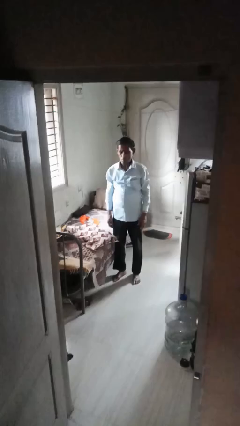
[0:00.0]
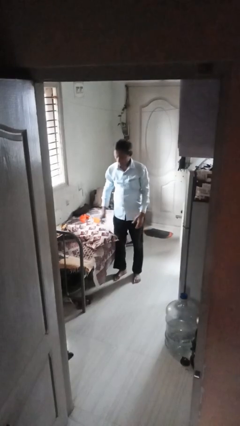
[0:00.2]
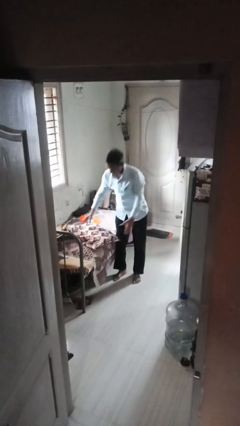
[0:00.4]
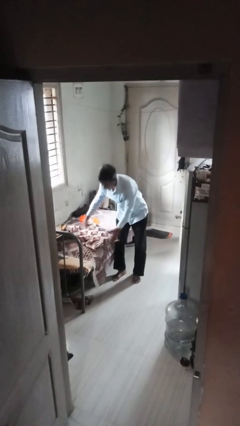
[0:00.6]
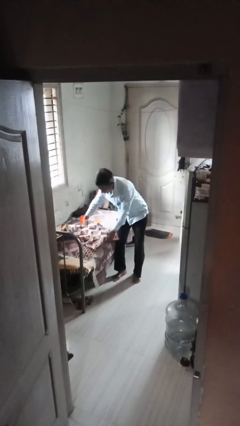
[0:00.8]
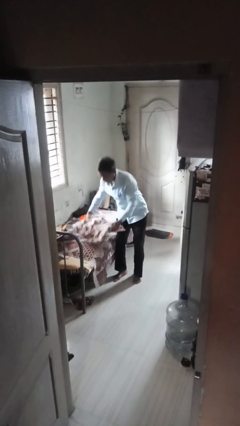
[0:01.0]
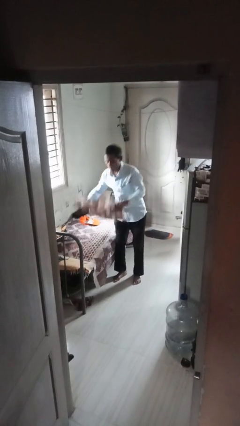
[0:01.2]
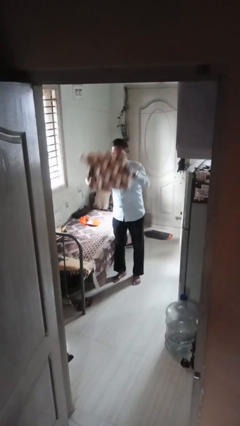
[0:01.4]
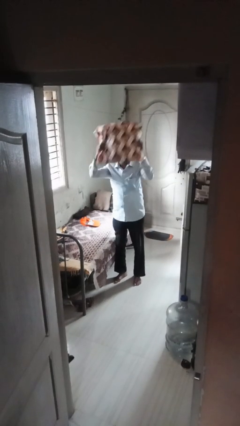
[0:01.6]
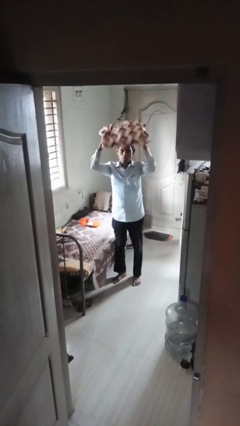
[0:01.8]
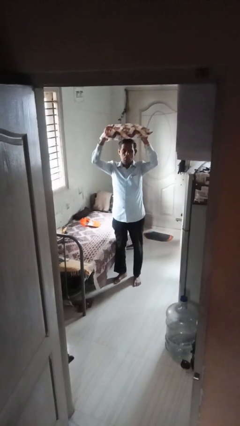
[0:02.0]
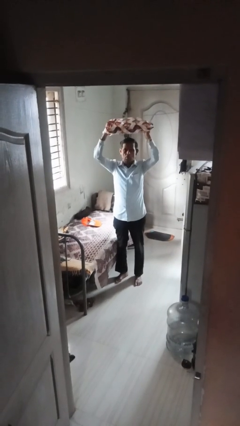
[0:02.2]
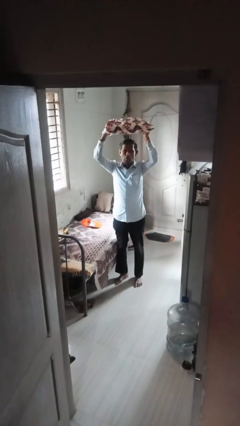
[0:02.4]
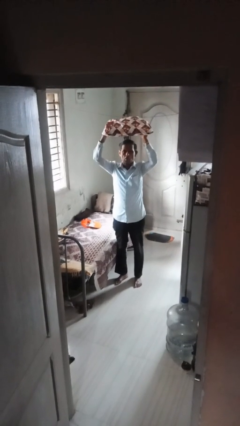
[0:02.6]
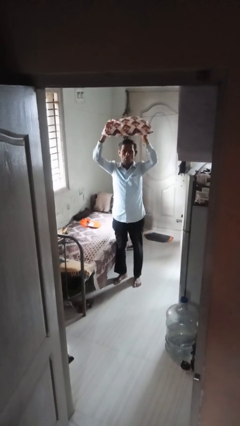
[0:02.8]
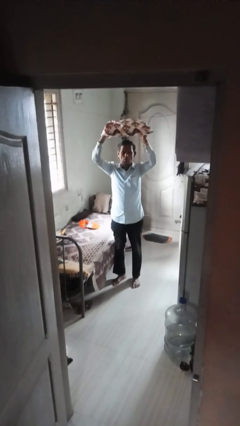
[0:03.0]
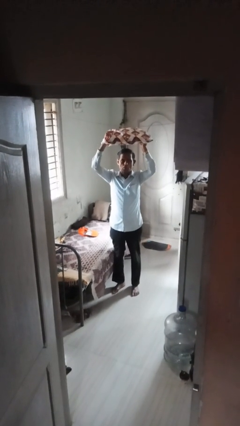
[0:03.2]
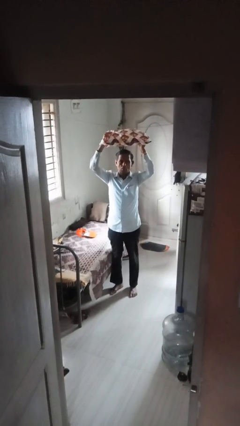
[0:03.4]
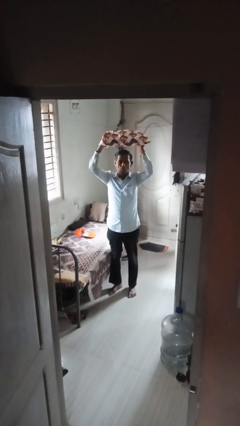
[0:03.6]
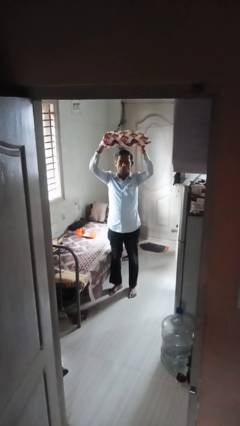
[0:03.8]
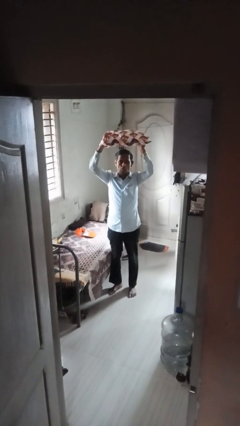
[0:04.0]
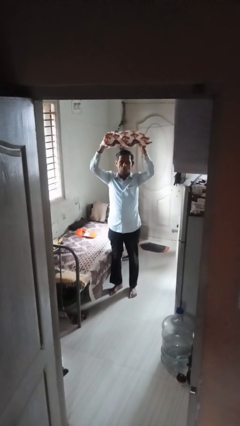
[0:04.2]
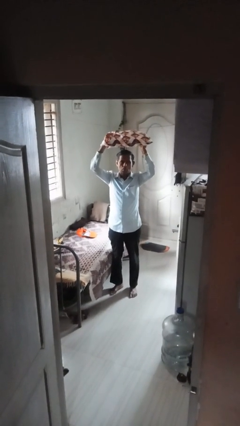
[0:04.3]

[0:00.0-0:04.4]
person holds object above head

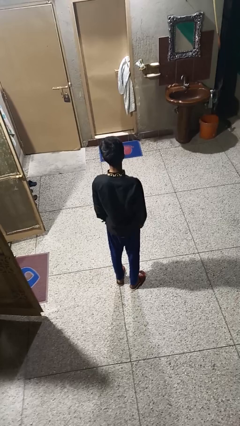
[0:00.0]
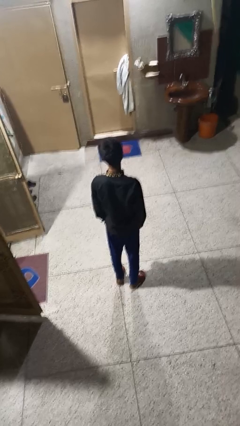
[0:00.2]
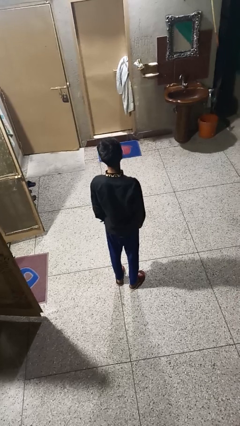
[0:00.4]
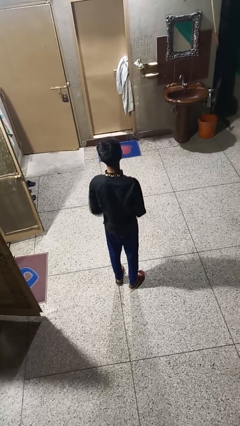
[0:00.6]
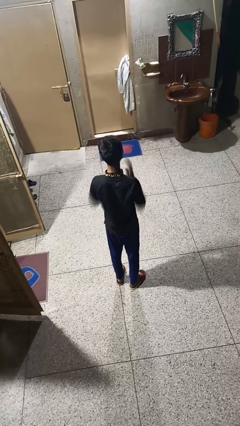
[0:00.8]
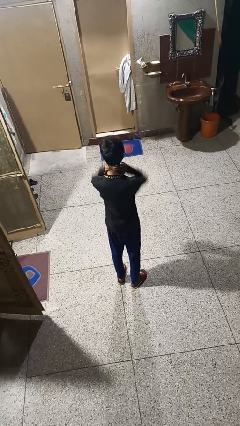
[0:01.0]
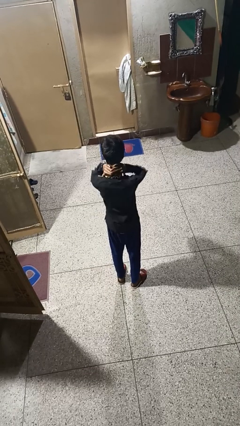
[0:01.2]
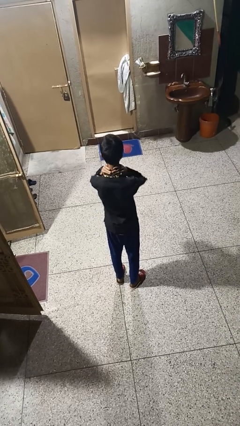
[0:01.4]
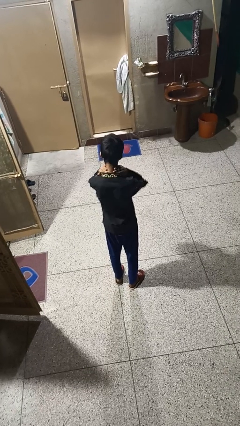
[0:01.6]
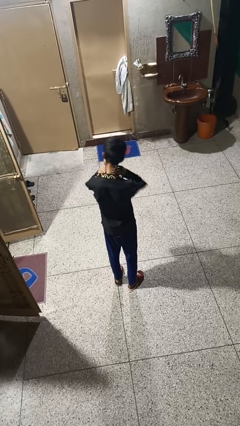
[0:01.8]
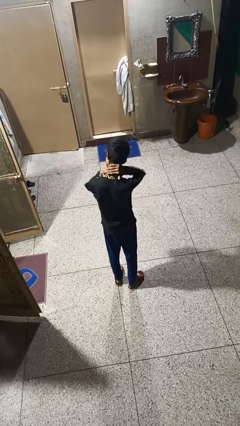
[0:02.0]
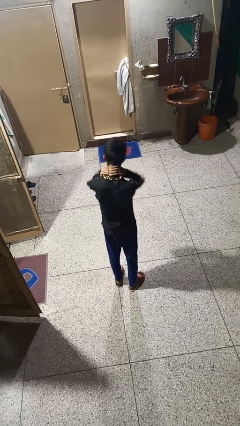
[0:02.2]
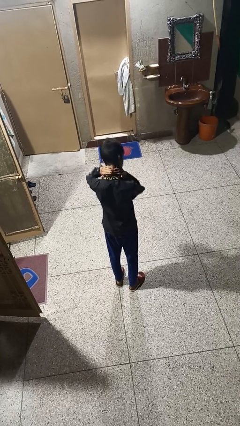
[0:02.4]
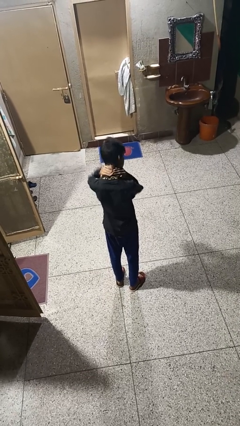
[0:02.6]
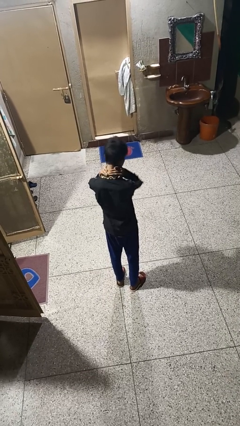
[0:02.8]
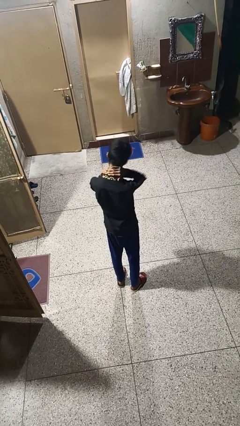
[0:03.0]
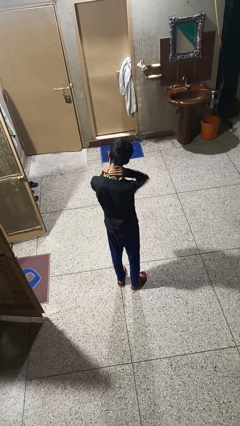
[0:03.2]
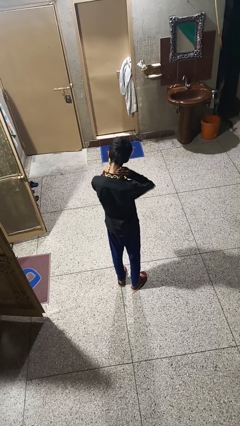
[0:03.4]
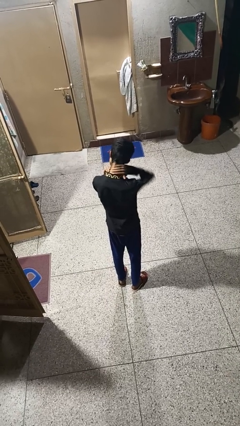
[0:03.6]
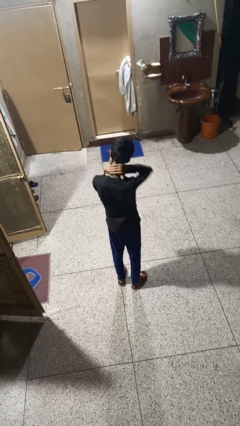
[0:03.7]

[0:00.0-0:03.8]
person rubs neck

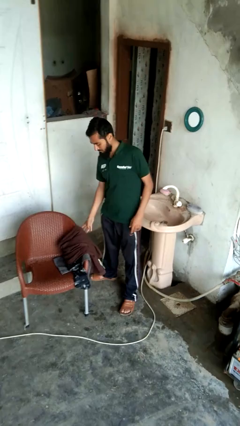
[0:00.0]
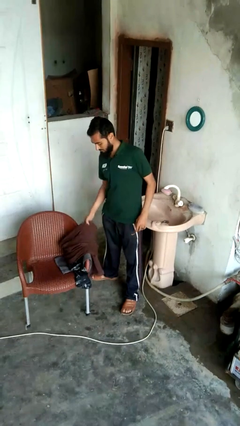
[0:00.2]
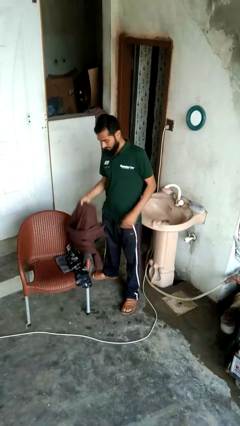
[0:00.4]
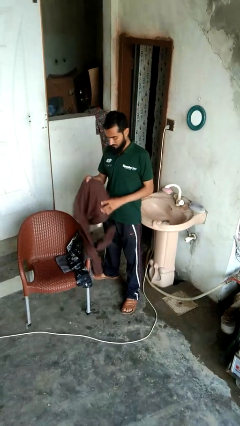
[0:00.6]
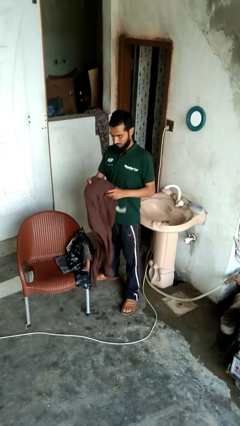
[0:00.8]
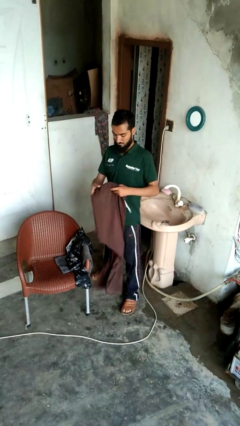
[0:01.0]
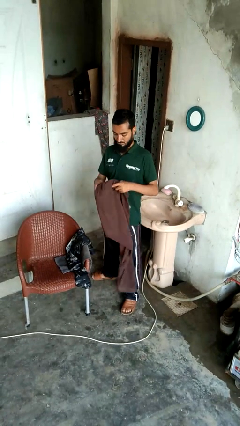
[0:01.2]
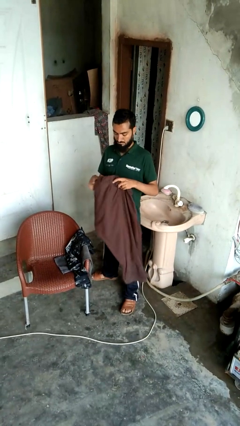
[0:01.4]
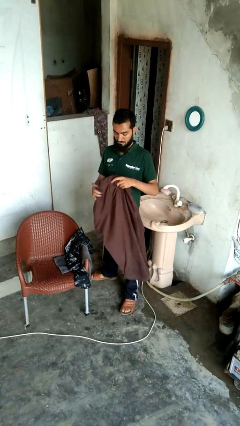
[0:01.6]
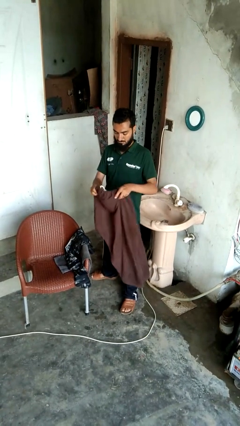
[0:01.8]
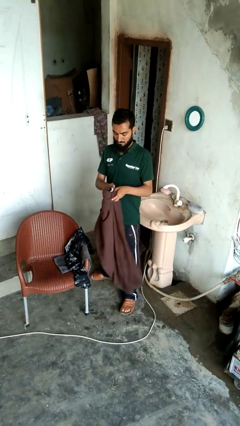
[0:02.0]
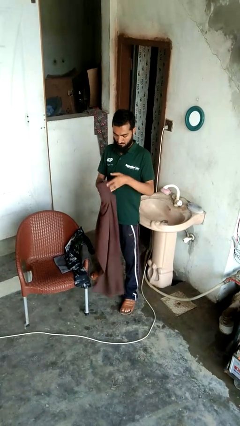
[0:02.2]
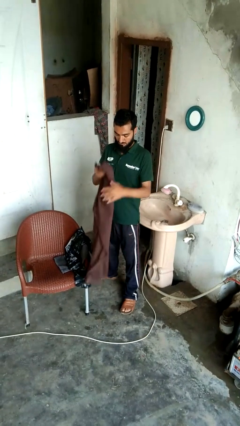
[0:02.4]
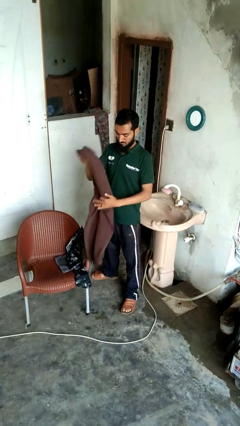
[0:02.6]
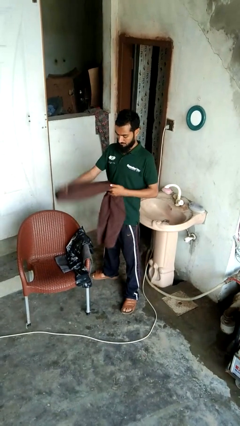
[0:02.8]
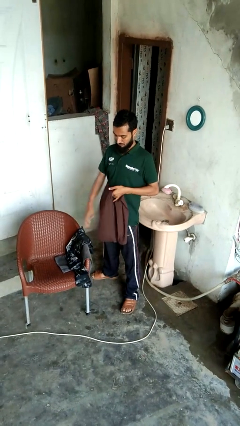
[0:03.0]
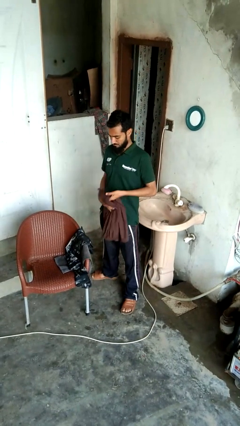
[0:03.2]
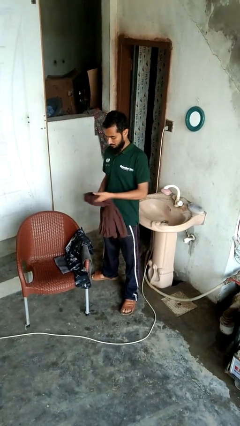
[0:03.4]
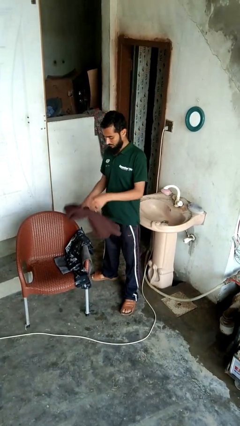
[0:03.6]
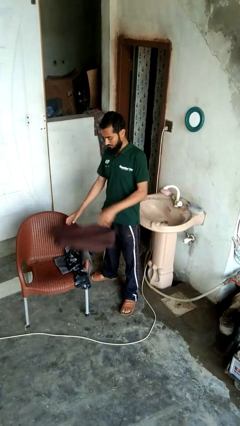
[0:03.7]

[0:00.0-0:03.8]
person folds pants

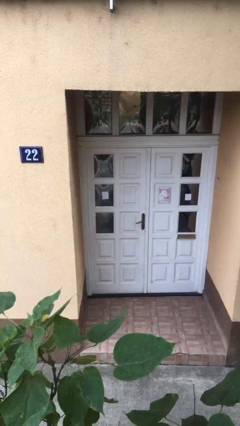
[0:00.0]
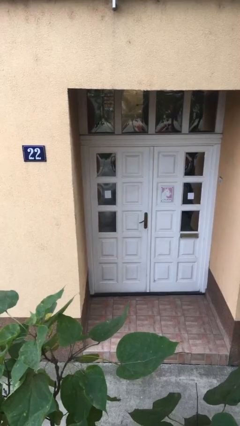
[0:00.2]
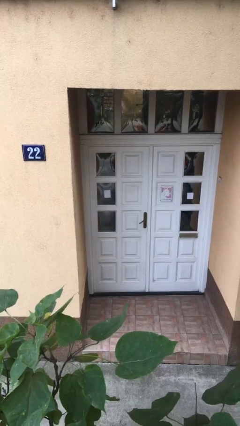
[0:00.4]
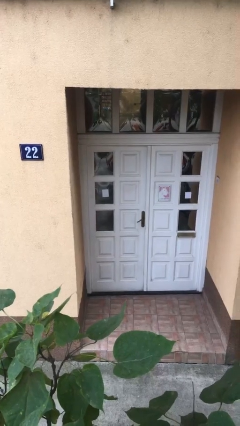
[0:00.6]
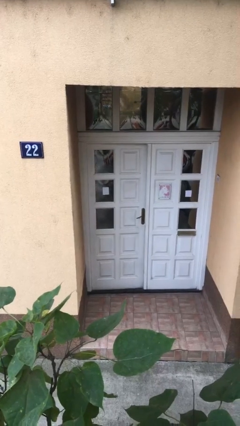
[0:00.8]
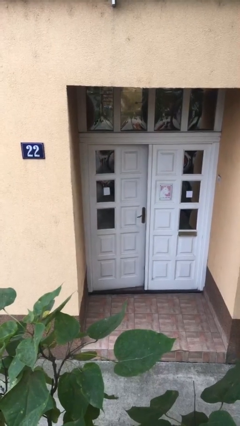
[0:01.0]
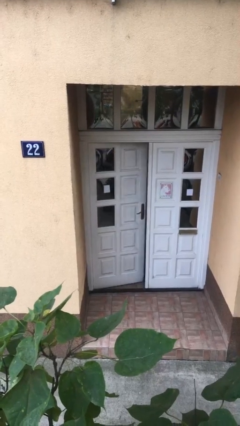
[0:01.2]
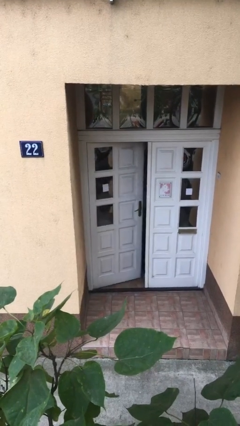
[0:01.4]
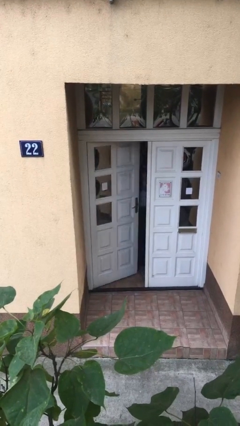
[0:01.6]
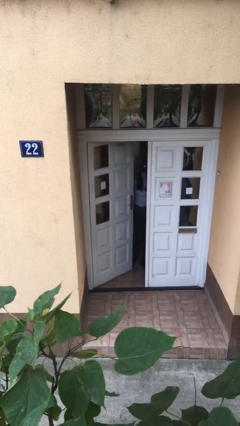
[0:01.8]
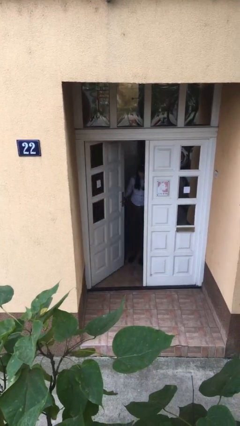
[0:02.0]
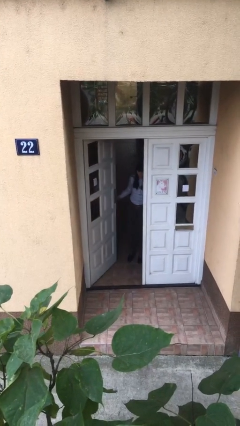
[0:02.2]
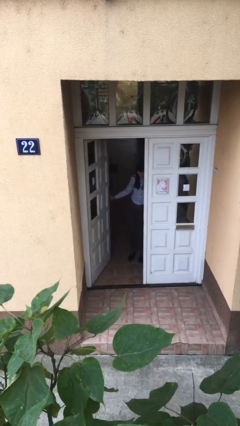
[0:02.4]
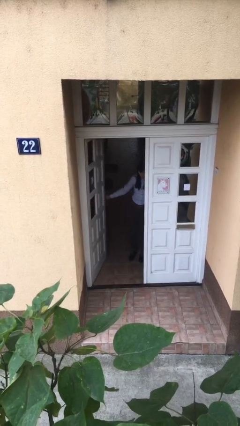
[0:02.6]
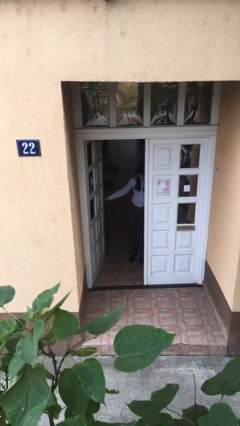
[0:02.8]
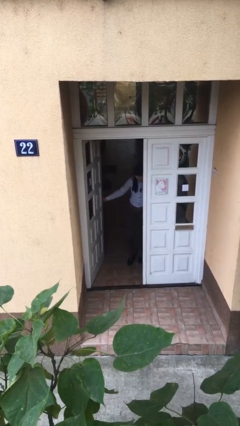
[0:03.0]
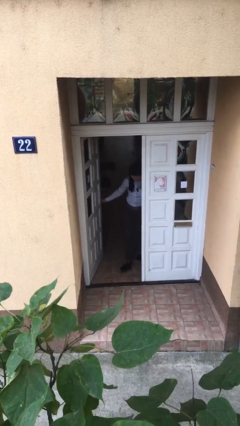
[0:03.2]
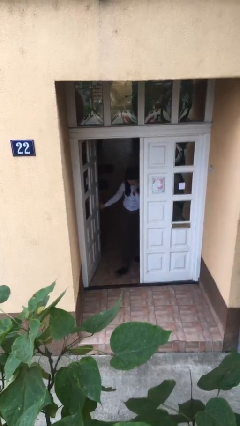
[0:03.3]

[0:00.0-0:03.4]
person opens facility door

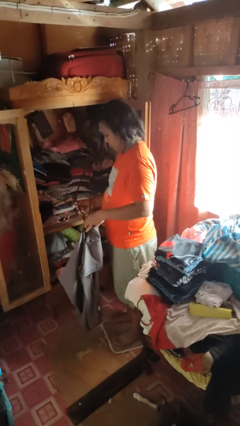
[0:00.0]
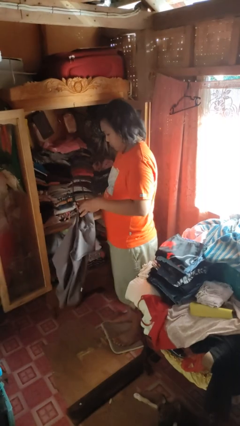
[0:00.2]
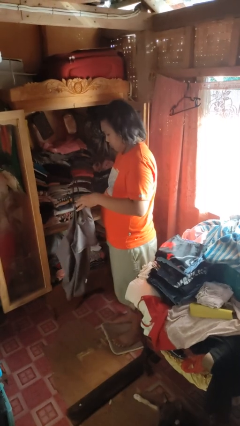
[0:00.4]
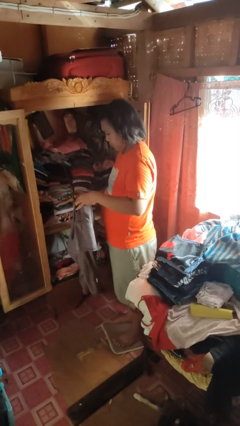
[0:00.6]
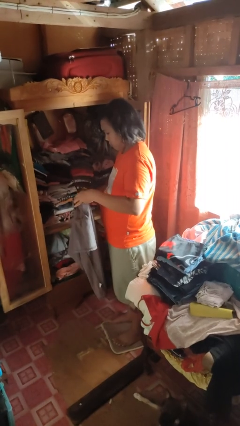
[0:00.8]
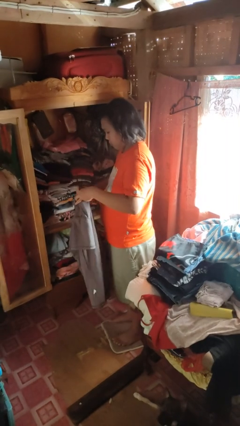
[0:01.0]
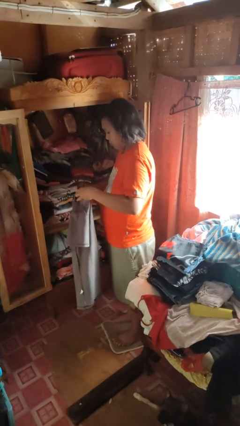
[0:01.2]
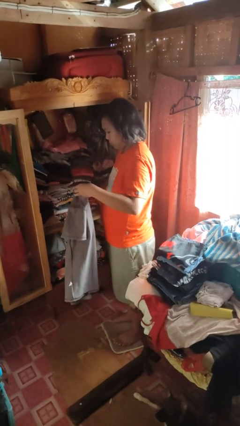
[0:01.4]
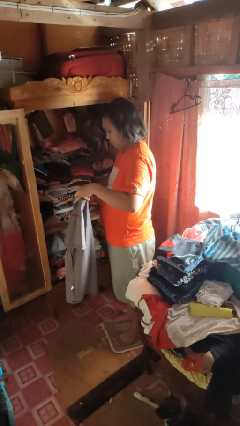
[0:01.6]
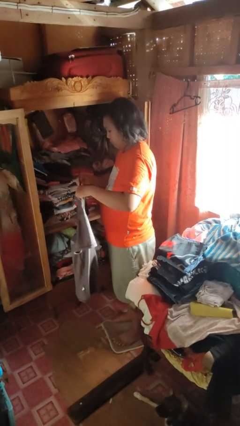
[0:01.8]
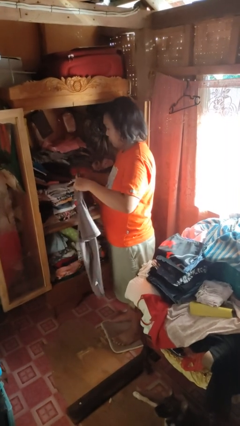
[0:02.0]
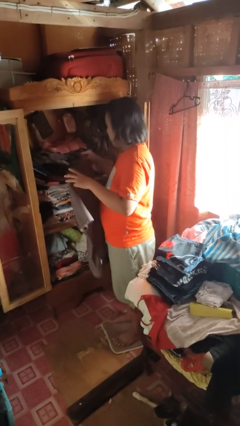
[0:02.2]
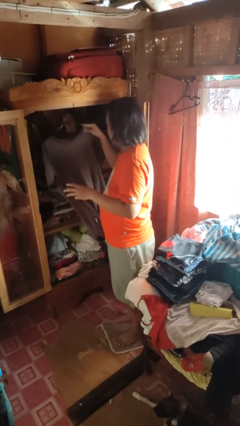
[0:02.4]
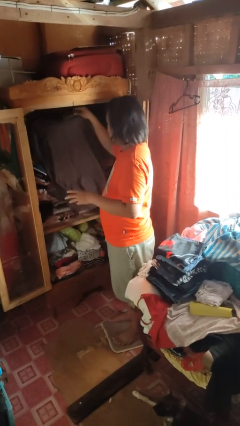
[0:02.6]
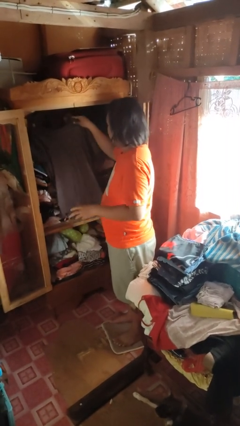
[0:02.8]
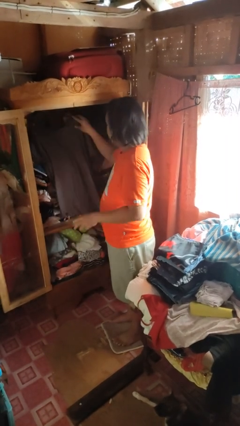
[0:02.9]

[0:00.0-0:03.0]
person puts clothes into closet
